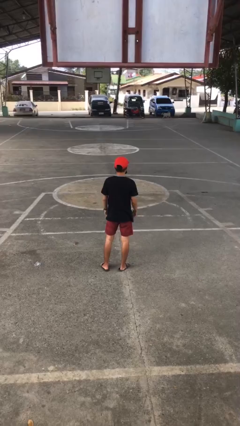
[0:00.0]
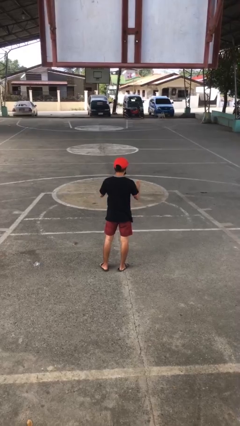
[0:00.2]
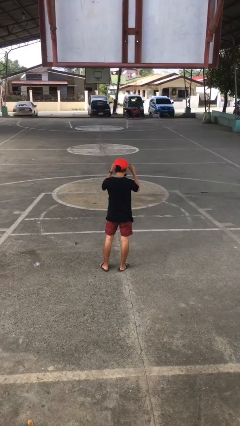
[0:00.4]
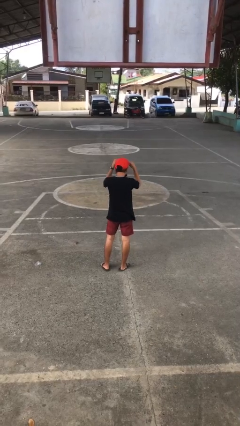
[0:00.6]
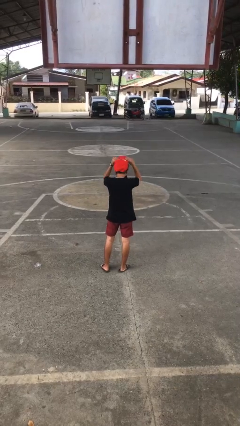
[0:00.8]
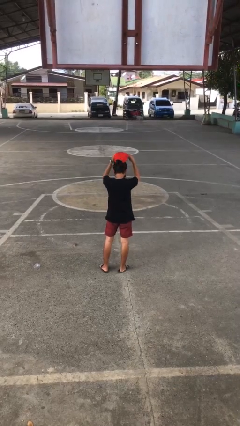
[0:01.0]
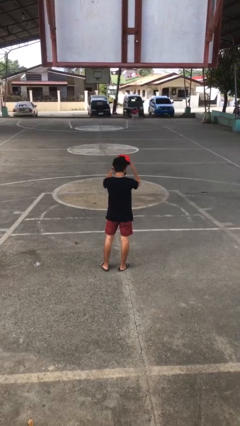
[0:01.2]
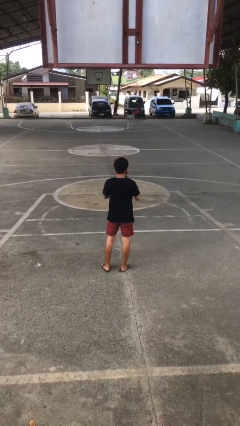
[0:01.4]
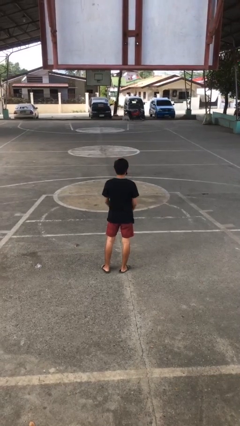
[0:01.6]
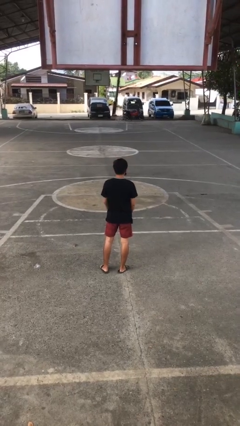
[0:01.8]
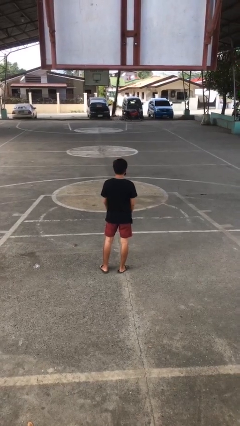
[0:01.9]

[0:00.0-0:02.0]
person takes off hat

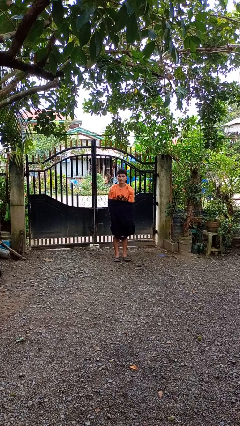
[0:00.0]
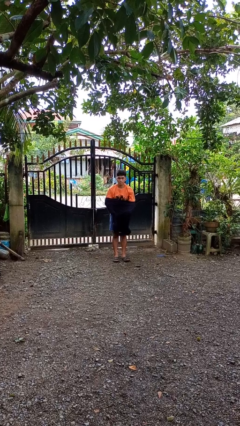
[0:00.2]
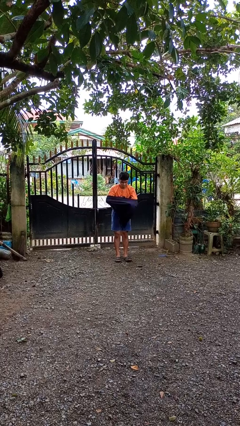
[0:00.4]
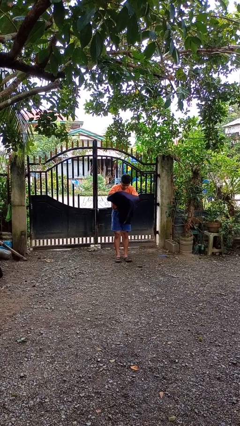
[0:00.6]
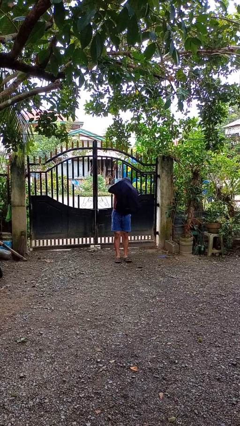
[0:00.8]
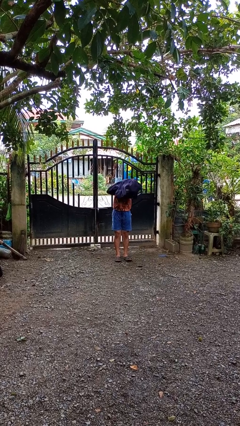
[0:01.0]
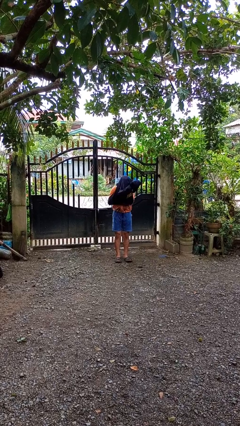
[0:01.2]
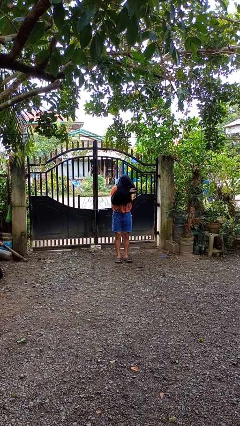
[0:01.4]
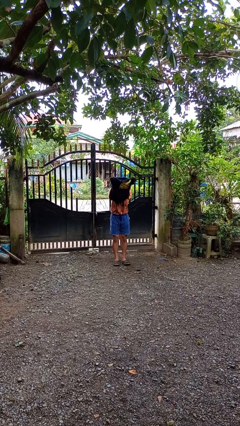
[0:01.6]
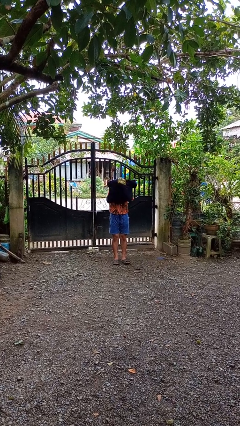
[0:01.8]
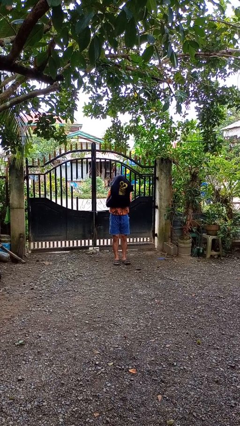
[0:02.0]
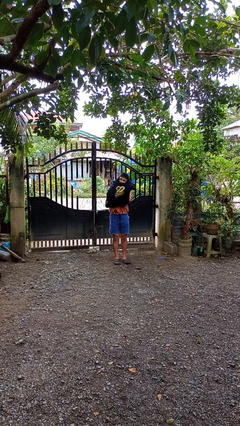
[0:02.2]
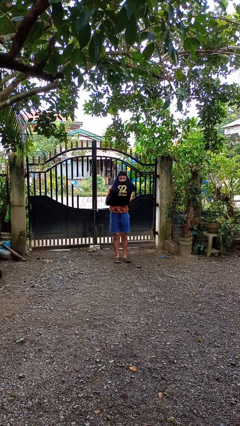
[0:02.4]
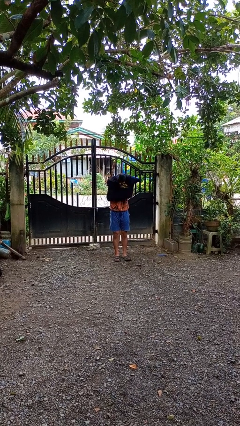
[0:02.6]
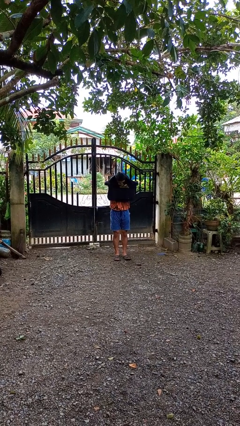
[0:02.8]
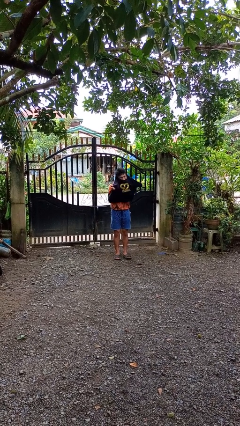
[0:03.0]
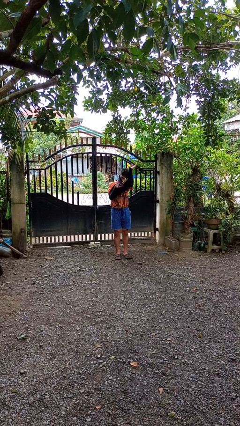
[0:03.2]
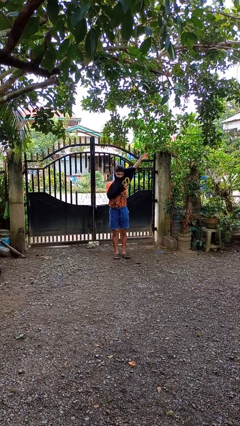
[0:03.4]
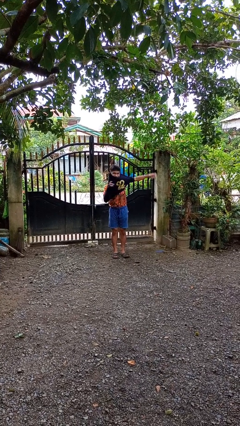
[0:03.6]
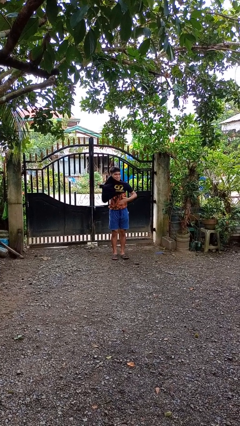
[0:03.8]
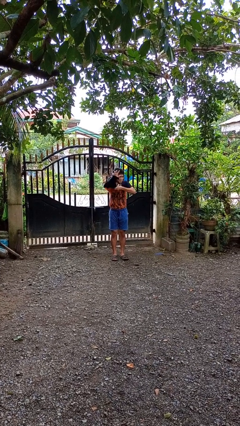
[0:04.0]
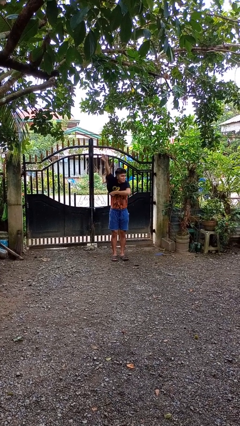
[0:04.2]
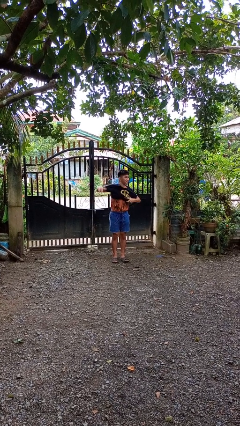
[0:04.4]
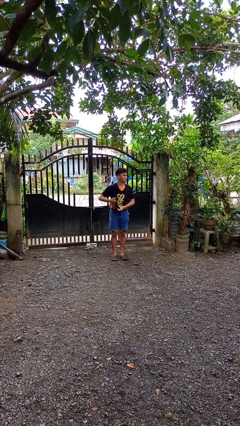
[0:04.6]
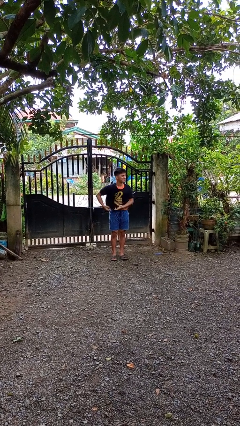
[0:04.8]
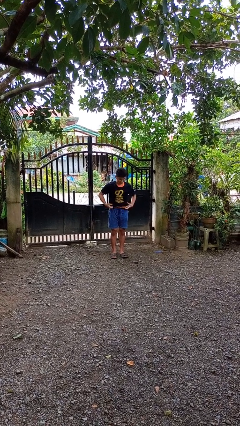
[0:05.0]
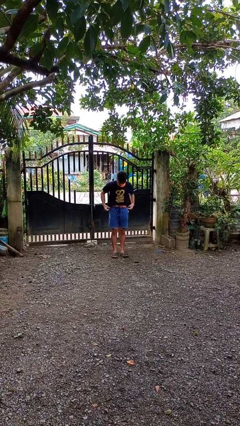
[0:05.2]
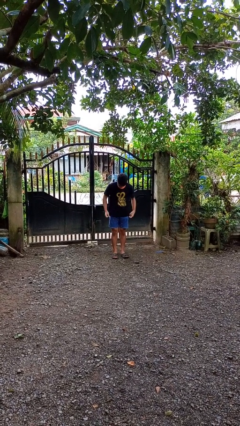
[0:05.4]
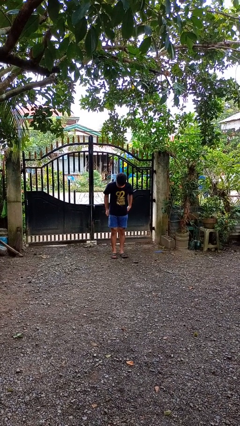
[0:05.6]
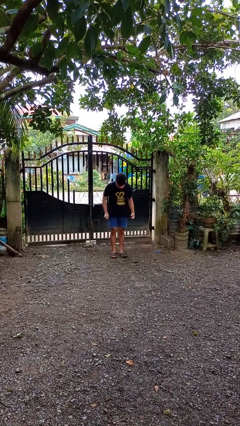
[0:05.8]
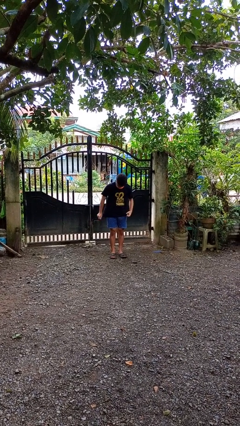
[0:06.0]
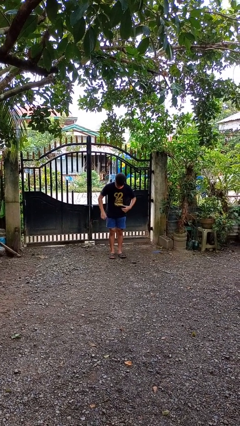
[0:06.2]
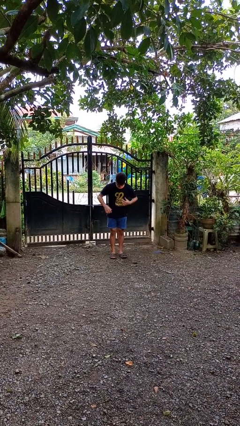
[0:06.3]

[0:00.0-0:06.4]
person puts on shirt

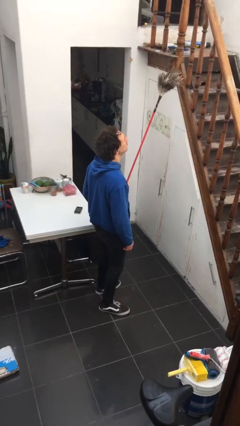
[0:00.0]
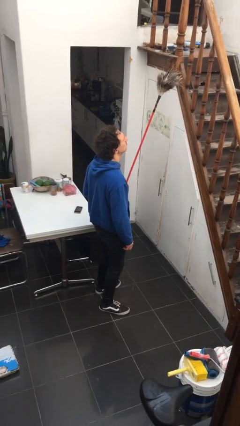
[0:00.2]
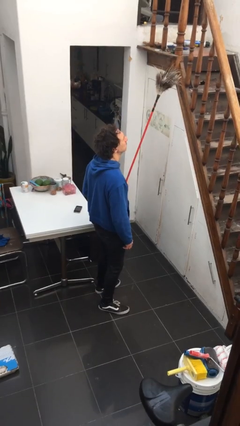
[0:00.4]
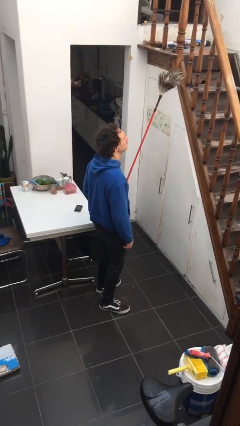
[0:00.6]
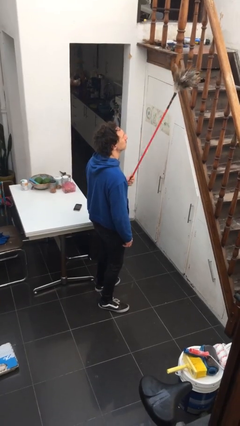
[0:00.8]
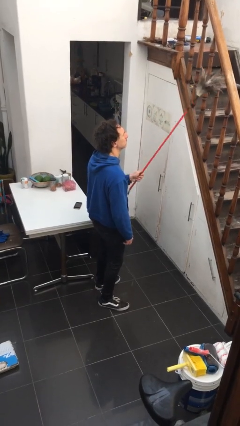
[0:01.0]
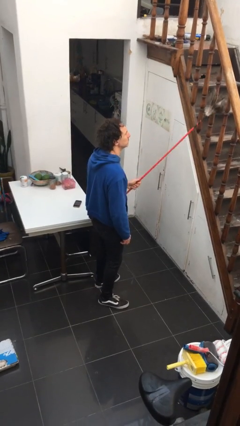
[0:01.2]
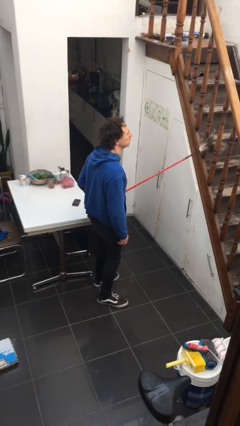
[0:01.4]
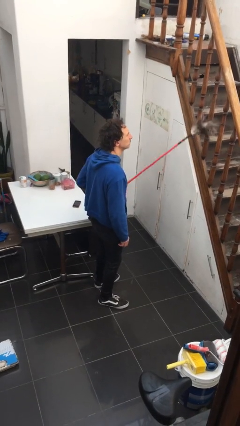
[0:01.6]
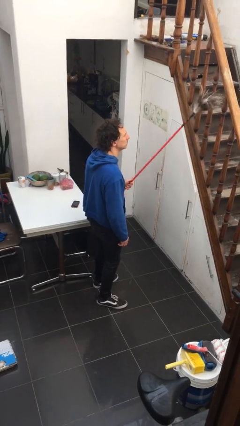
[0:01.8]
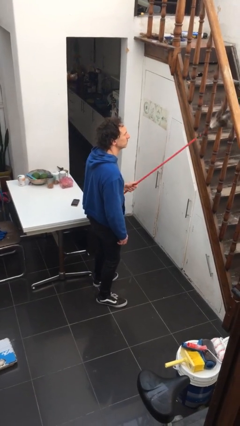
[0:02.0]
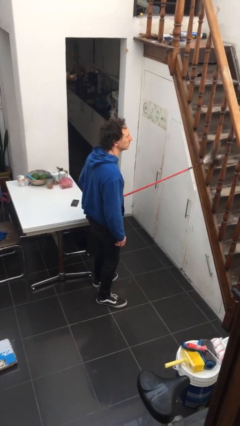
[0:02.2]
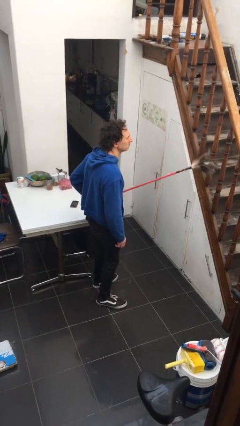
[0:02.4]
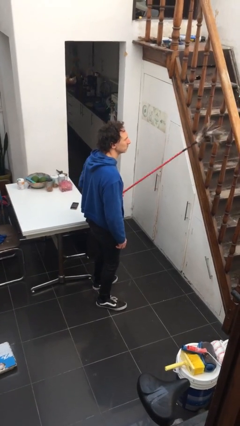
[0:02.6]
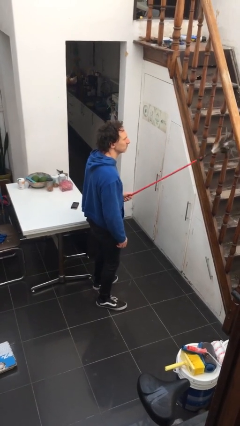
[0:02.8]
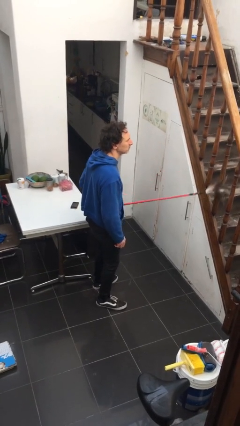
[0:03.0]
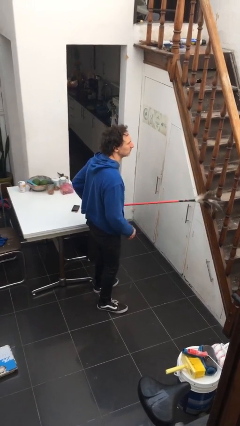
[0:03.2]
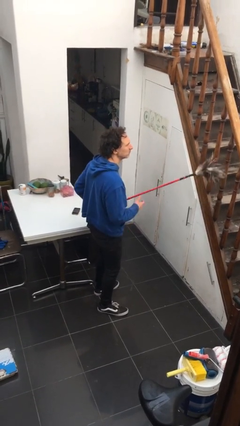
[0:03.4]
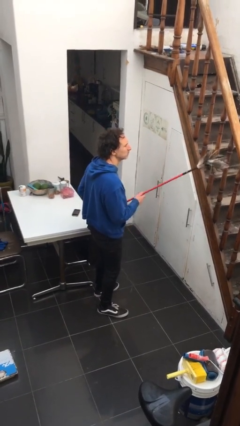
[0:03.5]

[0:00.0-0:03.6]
person dusts furniture

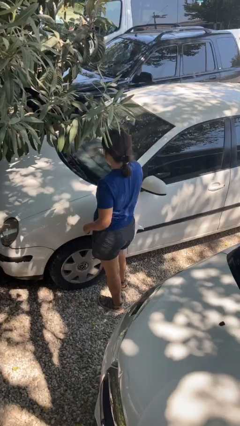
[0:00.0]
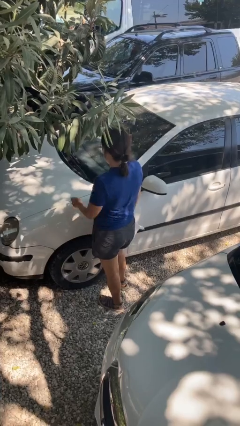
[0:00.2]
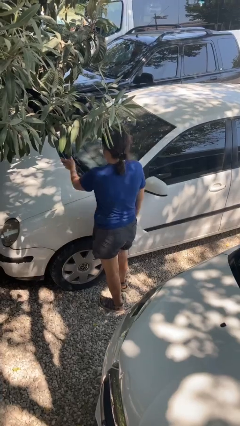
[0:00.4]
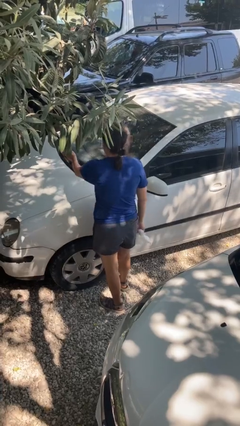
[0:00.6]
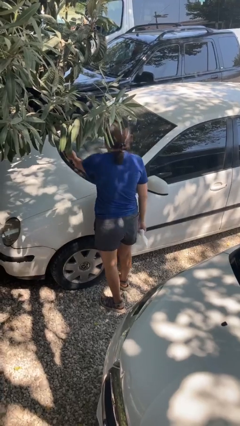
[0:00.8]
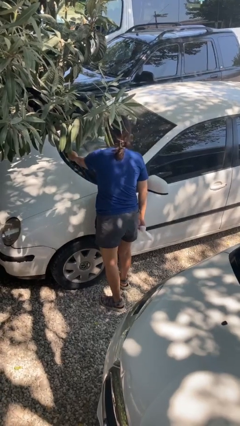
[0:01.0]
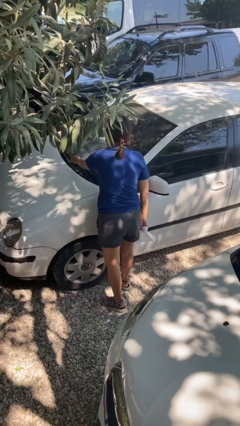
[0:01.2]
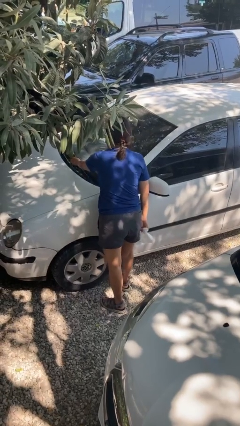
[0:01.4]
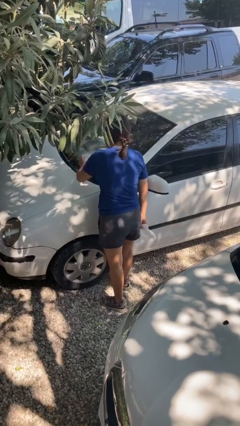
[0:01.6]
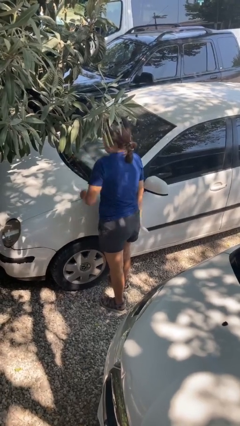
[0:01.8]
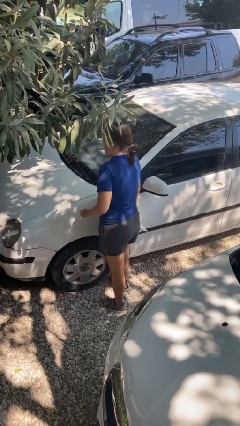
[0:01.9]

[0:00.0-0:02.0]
person flips down car wipers

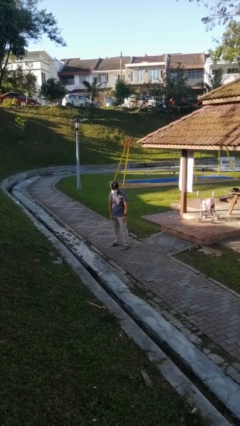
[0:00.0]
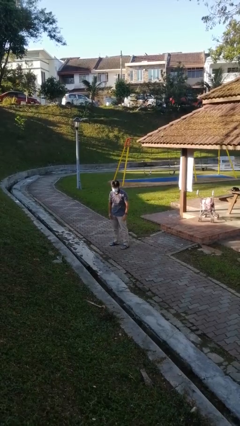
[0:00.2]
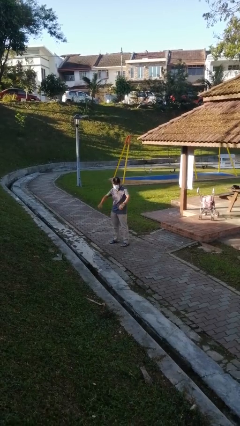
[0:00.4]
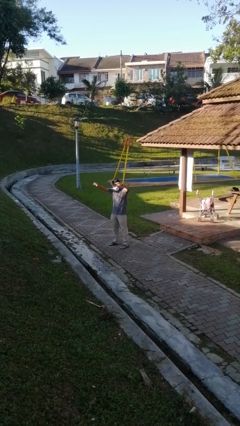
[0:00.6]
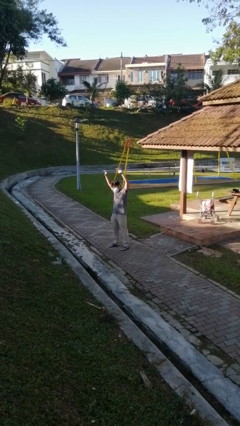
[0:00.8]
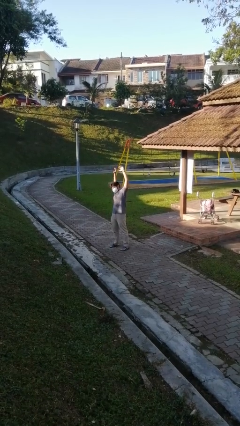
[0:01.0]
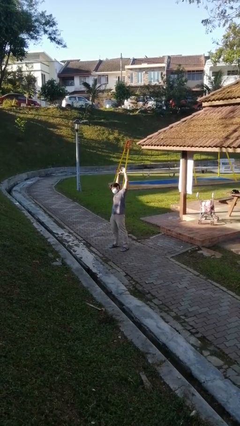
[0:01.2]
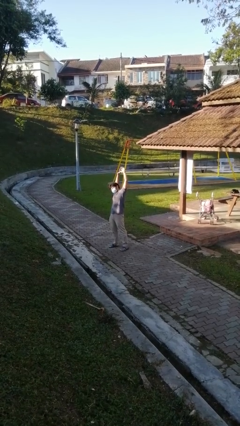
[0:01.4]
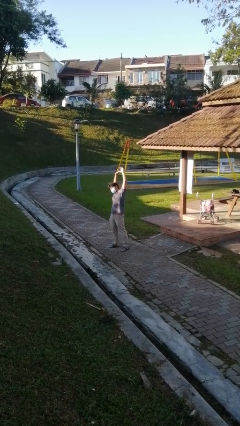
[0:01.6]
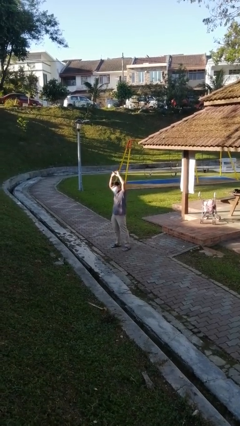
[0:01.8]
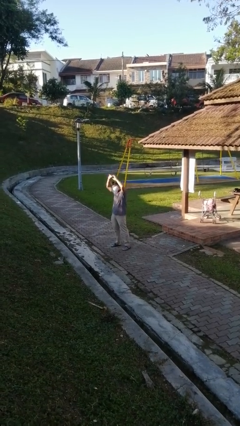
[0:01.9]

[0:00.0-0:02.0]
person stretches arms over head

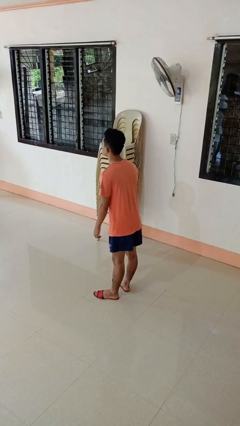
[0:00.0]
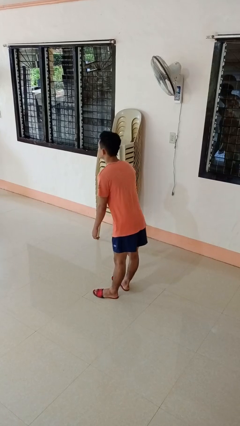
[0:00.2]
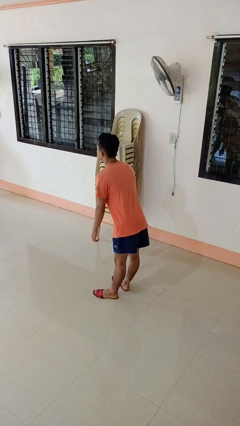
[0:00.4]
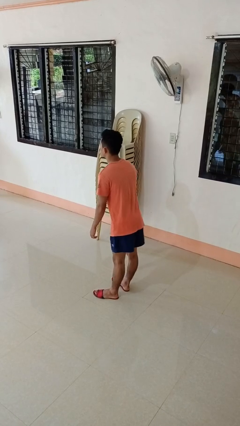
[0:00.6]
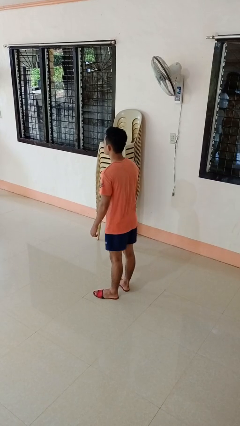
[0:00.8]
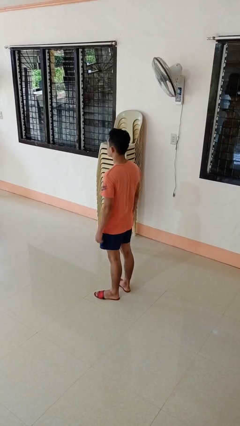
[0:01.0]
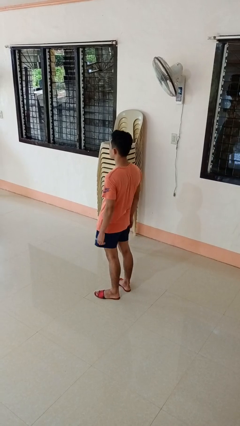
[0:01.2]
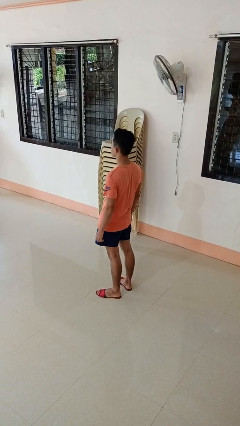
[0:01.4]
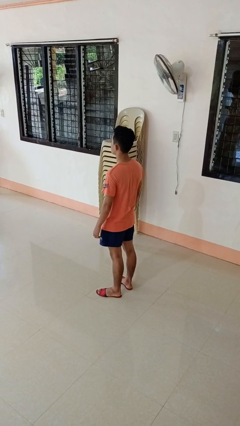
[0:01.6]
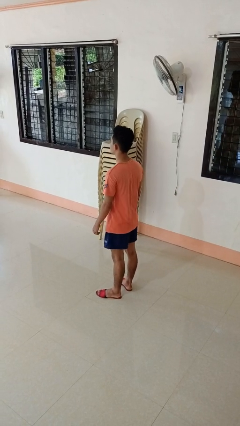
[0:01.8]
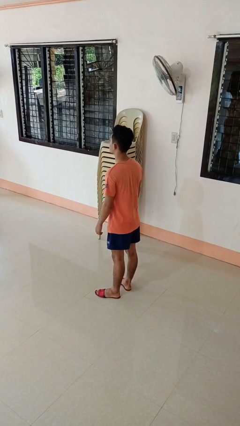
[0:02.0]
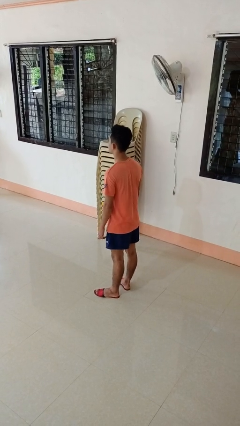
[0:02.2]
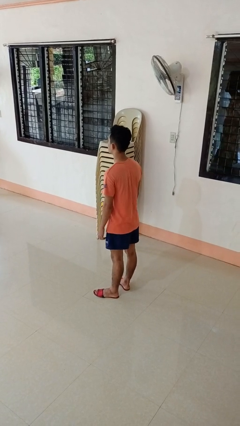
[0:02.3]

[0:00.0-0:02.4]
person wiggles hips
